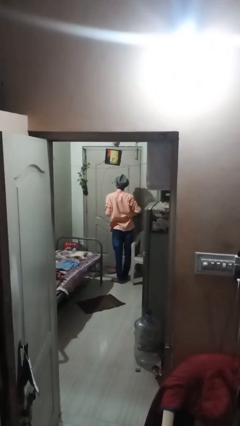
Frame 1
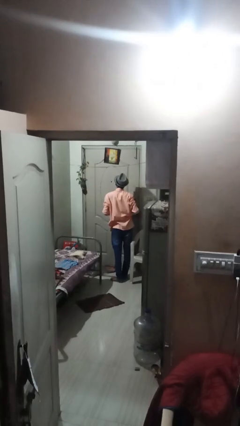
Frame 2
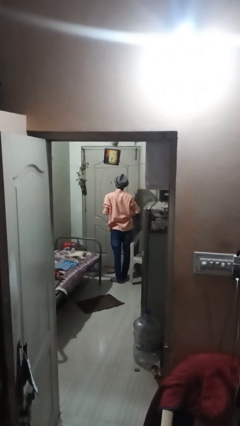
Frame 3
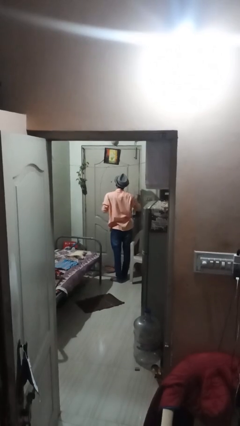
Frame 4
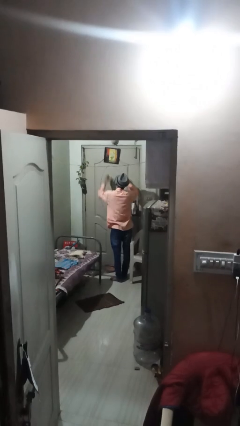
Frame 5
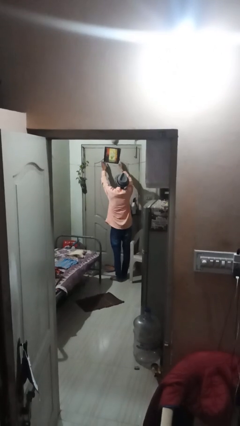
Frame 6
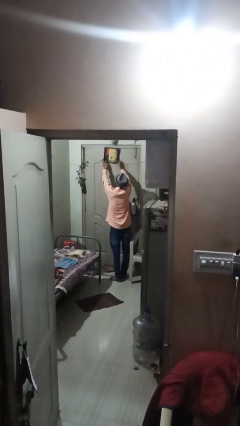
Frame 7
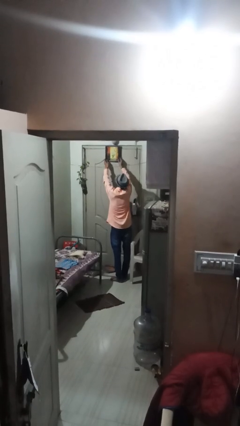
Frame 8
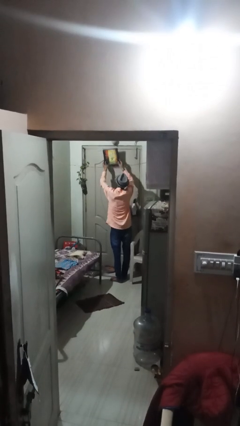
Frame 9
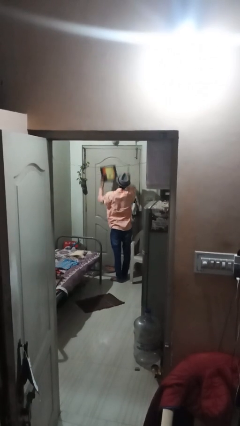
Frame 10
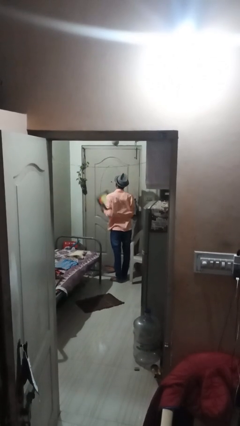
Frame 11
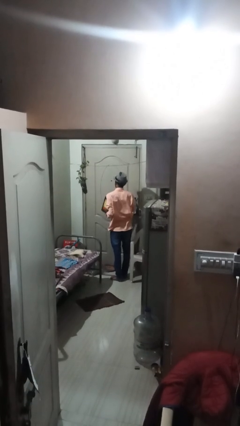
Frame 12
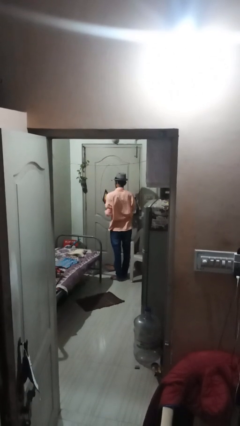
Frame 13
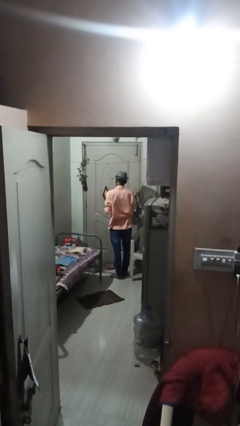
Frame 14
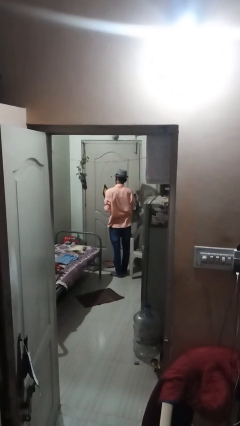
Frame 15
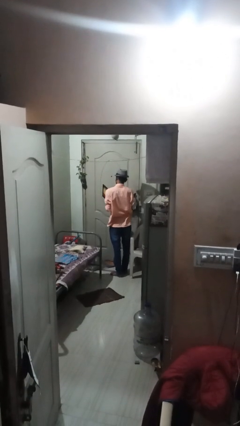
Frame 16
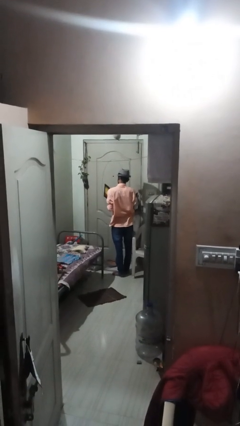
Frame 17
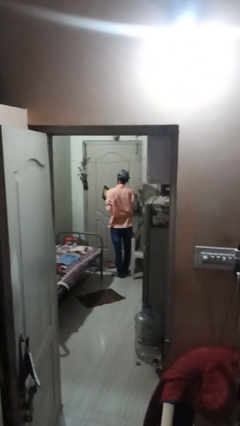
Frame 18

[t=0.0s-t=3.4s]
person takes down picture frame

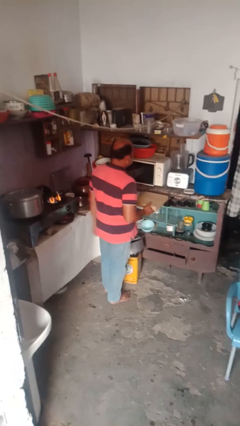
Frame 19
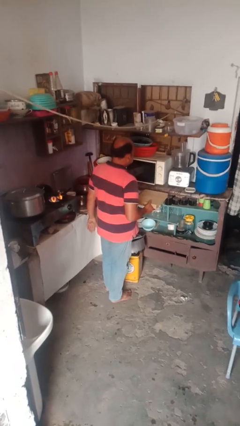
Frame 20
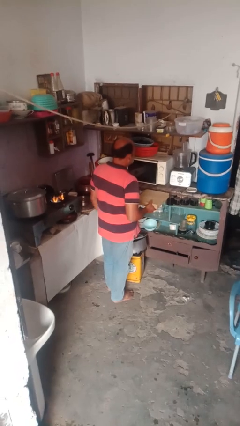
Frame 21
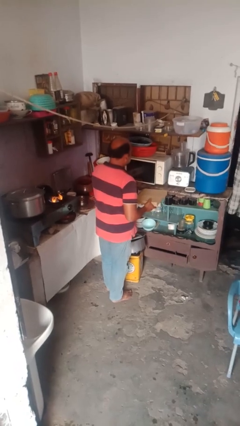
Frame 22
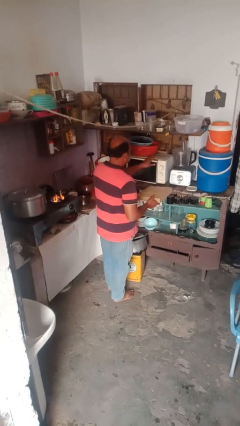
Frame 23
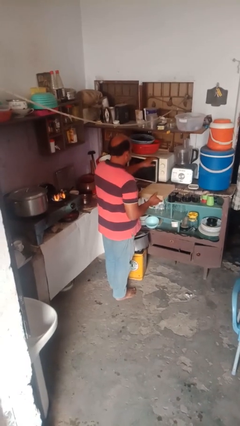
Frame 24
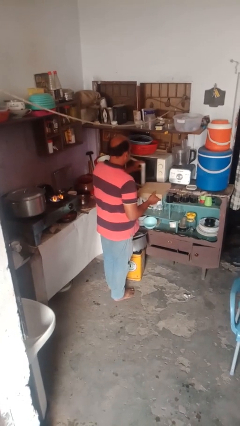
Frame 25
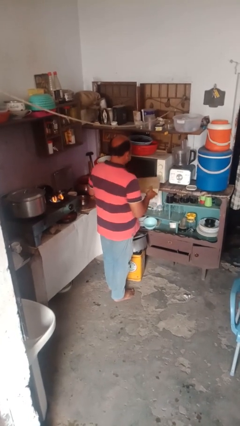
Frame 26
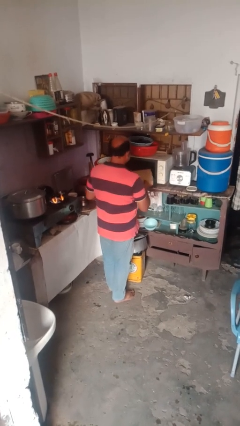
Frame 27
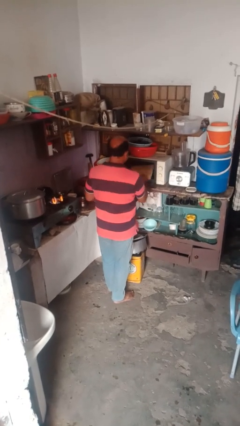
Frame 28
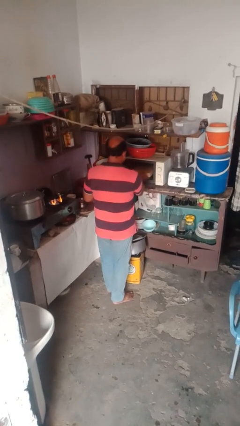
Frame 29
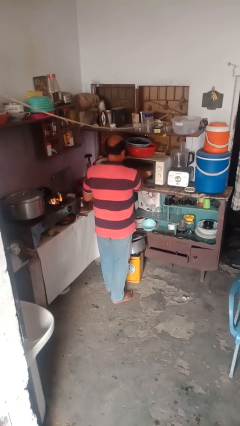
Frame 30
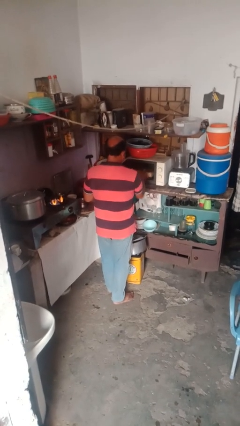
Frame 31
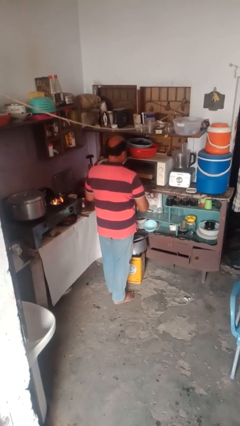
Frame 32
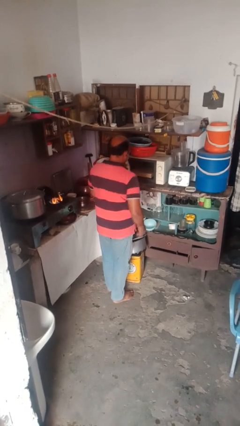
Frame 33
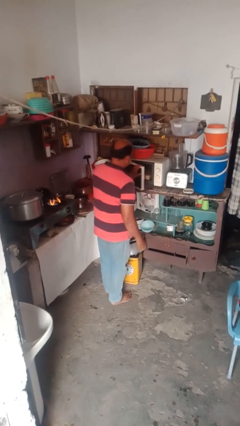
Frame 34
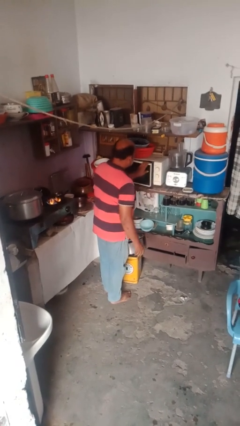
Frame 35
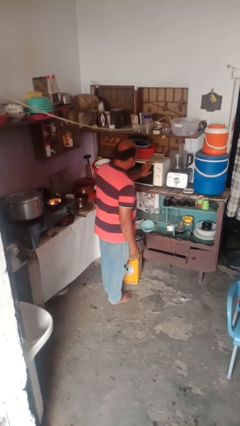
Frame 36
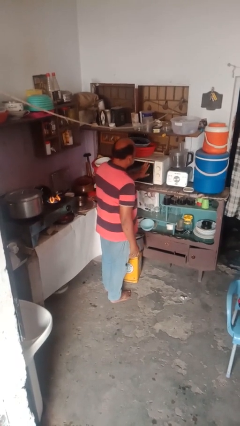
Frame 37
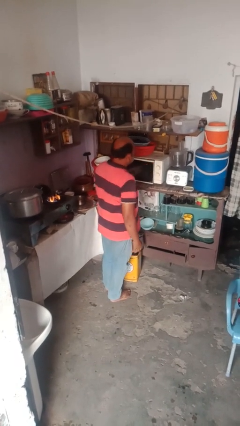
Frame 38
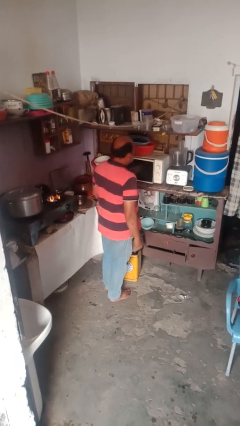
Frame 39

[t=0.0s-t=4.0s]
person puts object into microwave

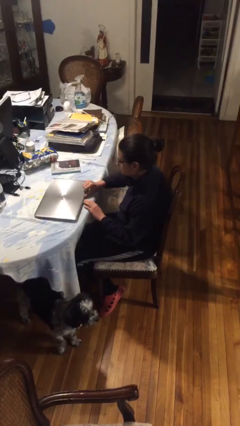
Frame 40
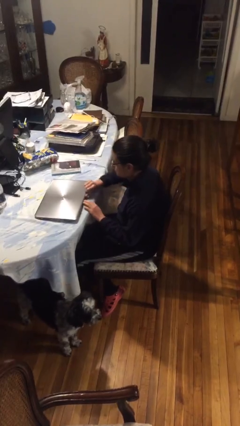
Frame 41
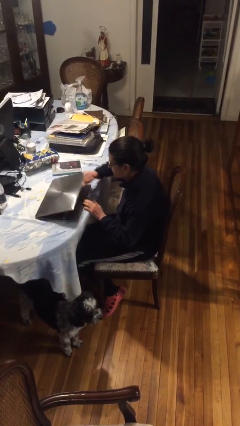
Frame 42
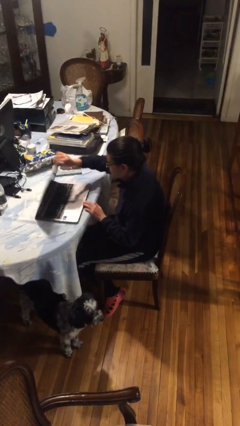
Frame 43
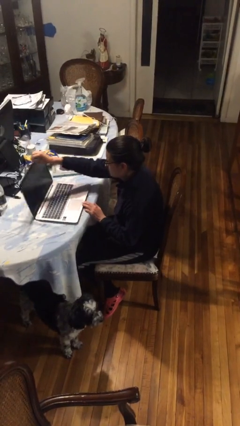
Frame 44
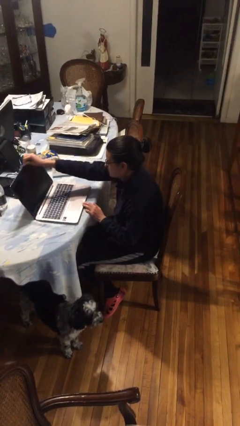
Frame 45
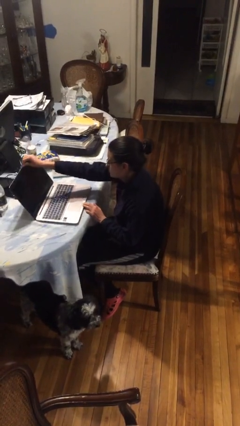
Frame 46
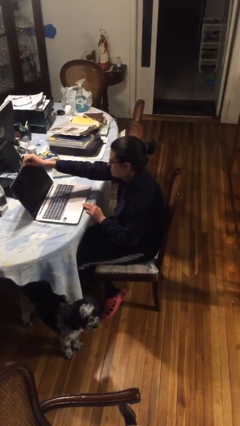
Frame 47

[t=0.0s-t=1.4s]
person opens laptop

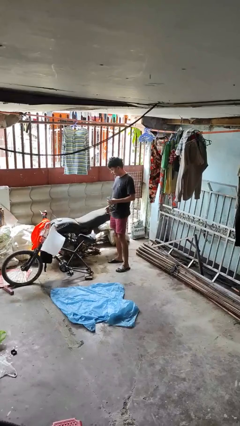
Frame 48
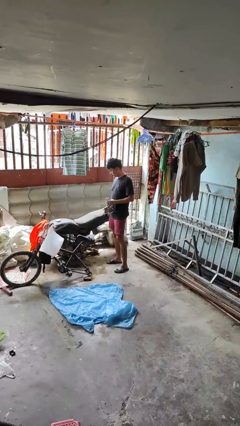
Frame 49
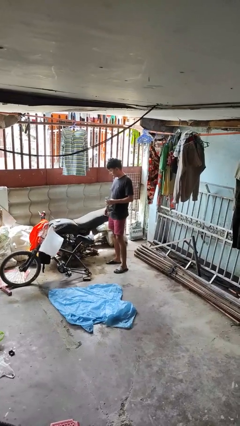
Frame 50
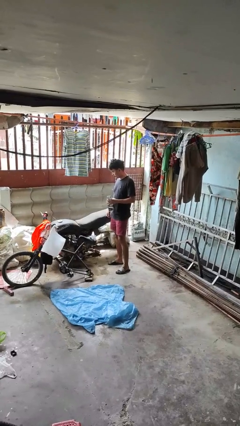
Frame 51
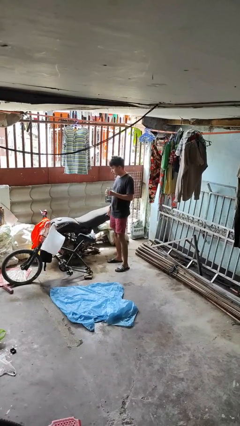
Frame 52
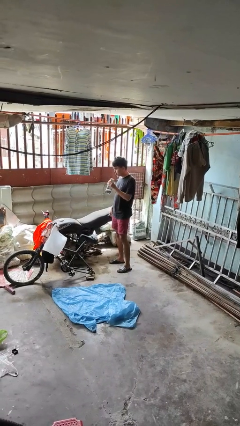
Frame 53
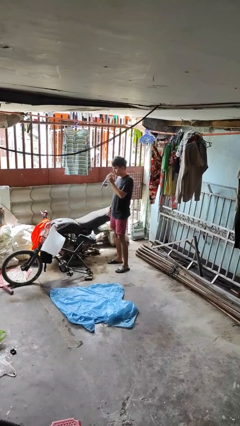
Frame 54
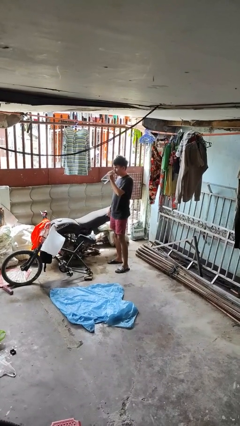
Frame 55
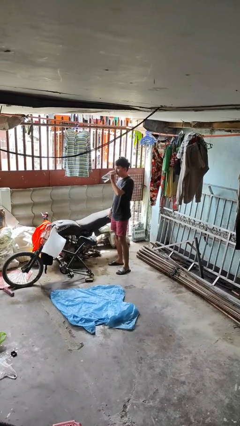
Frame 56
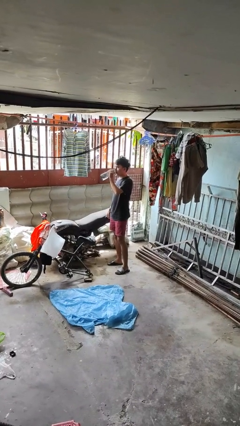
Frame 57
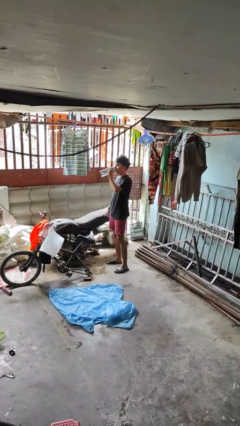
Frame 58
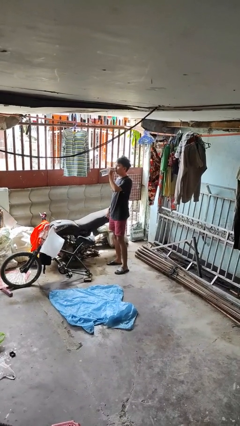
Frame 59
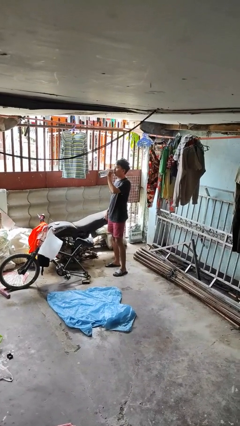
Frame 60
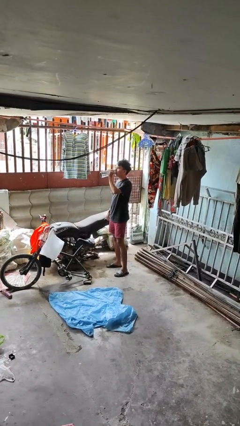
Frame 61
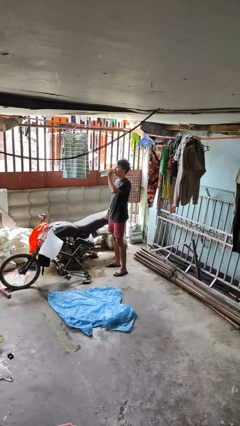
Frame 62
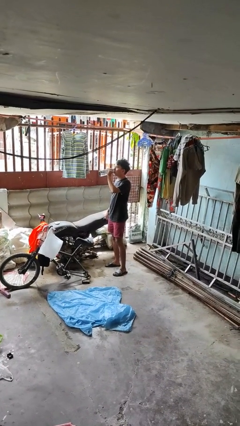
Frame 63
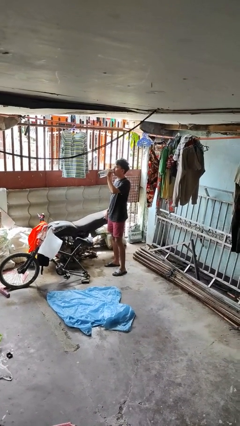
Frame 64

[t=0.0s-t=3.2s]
person drinks from bottle

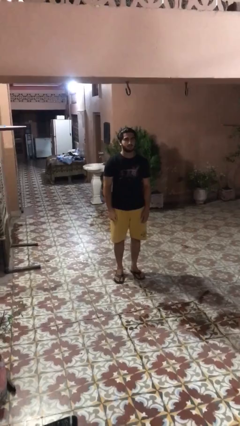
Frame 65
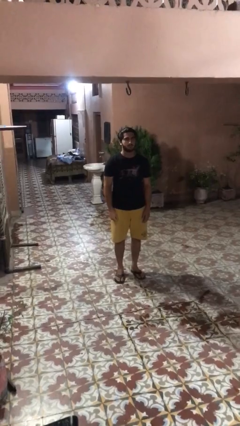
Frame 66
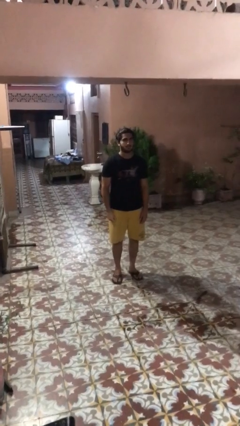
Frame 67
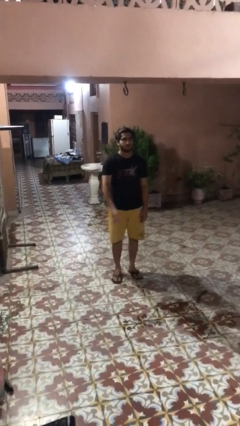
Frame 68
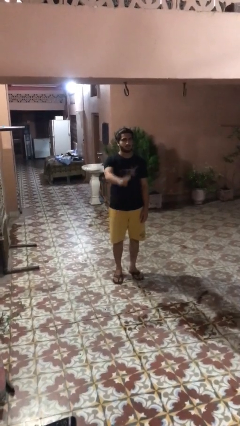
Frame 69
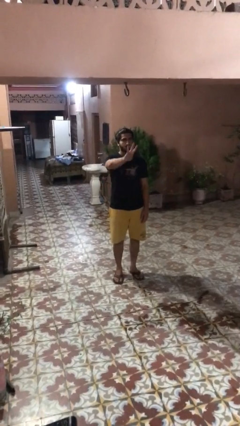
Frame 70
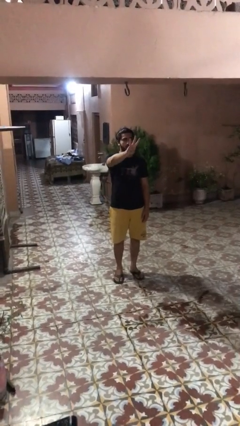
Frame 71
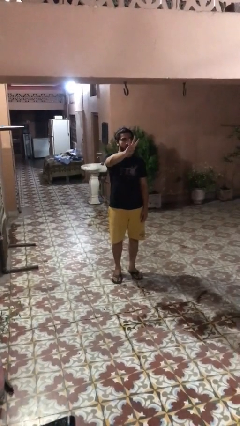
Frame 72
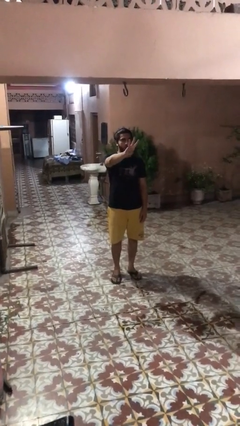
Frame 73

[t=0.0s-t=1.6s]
person gestures number three

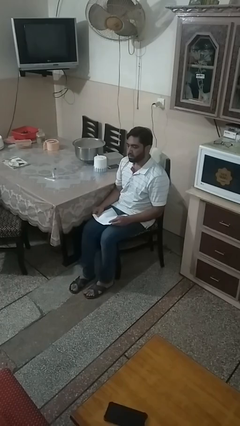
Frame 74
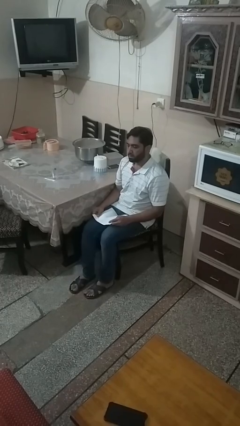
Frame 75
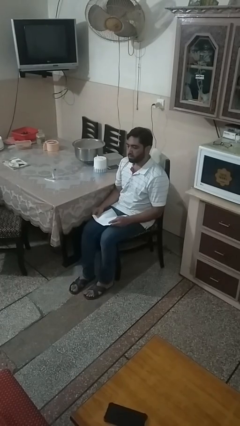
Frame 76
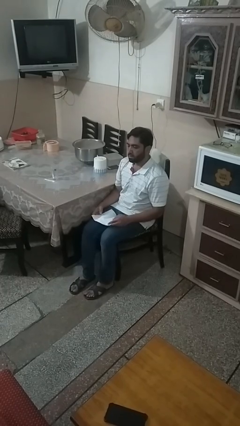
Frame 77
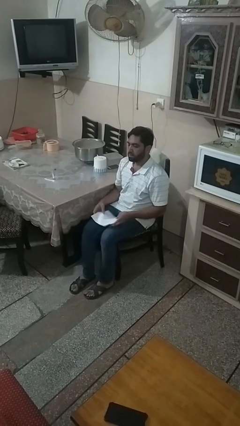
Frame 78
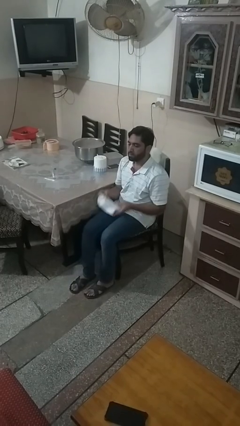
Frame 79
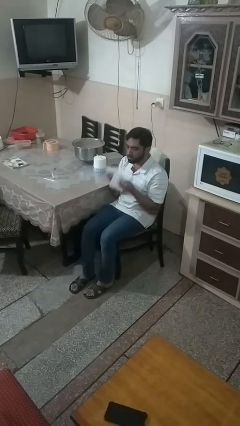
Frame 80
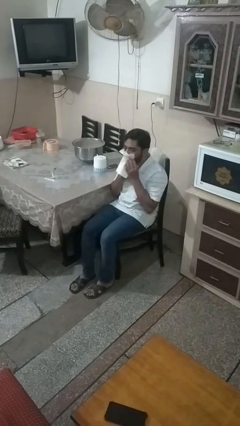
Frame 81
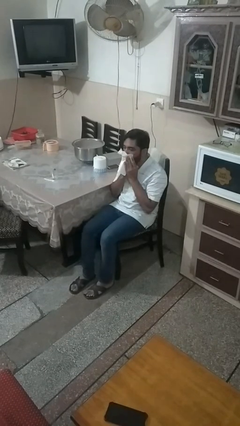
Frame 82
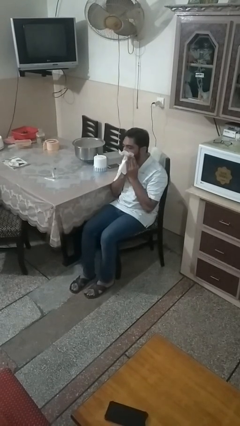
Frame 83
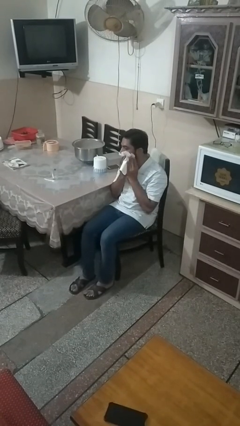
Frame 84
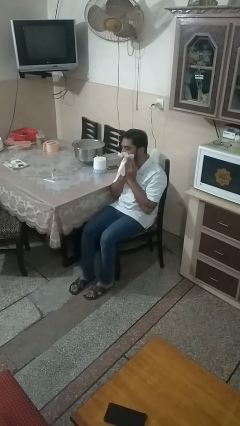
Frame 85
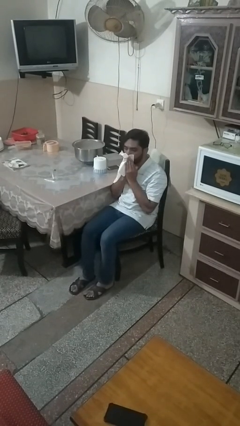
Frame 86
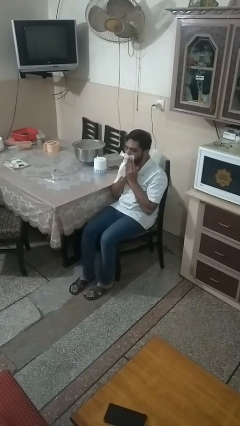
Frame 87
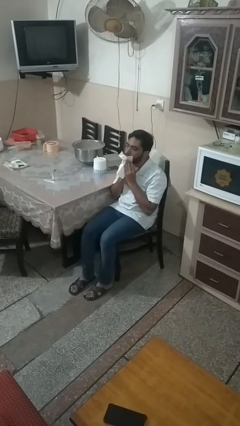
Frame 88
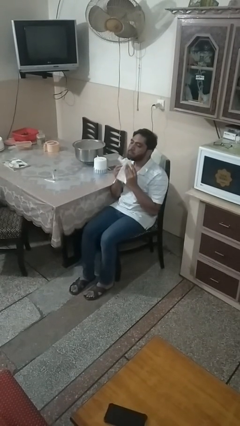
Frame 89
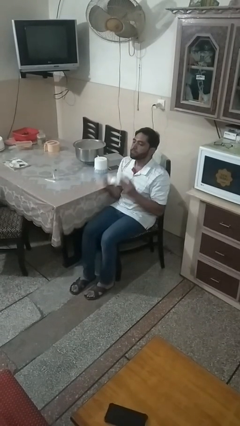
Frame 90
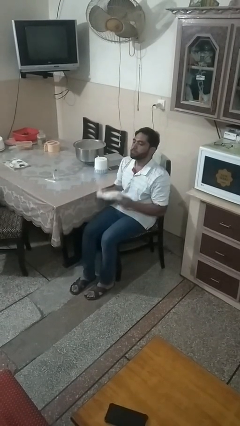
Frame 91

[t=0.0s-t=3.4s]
person wipes mouth with napkin

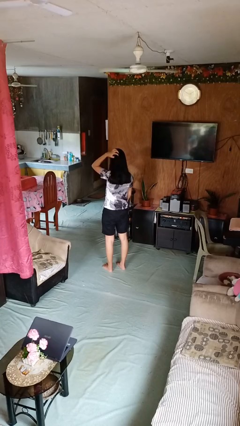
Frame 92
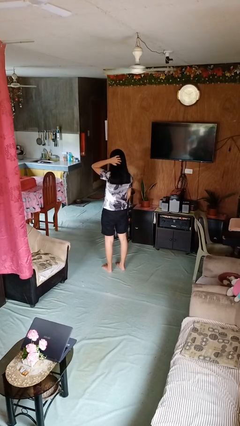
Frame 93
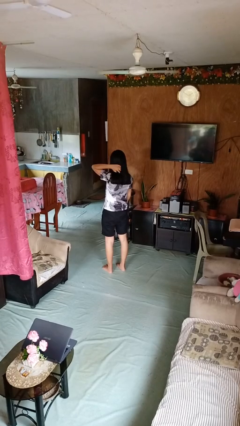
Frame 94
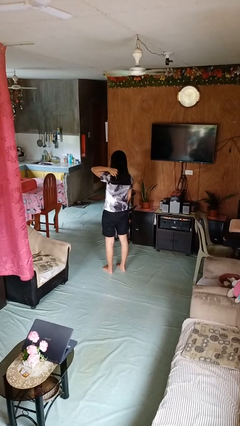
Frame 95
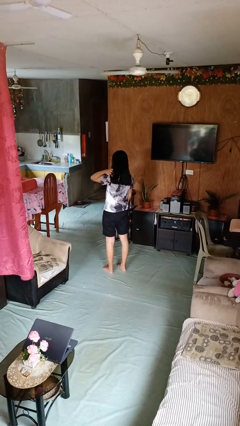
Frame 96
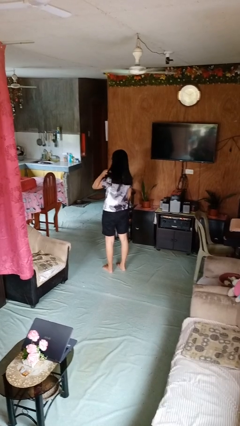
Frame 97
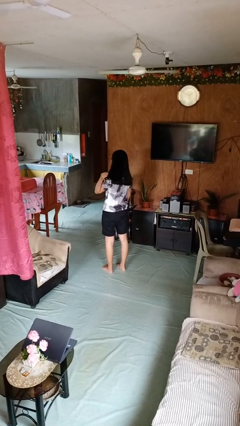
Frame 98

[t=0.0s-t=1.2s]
person strokes hair
